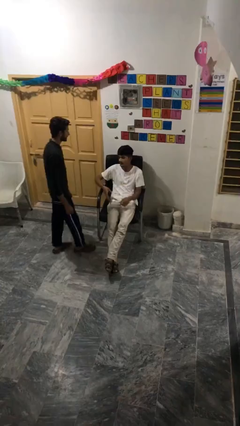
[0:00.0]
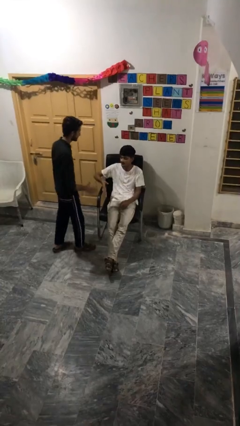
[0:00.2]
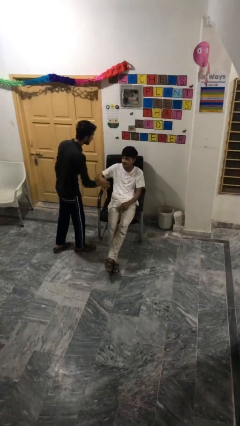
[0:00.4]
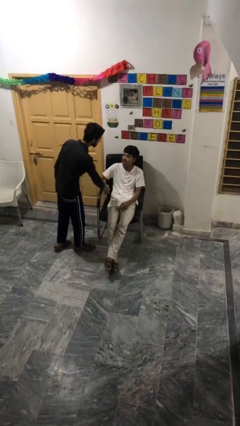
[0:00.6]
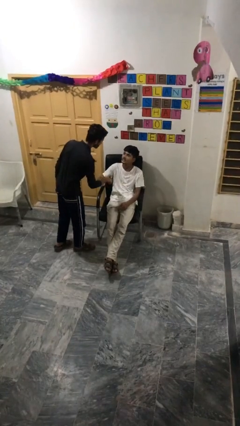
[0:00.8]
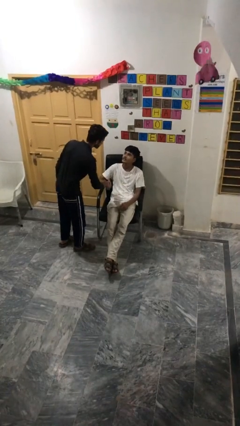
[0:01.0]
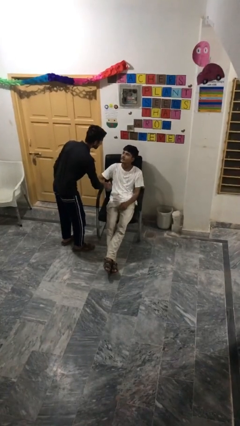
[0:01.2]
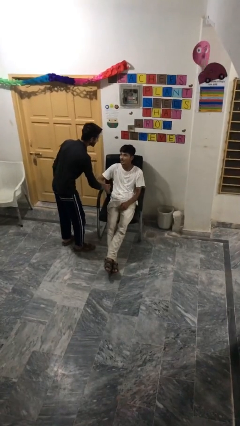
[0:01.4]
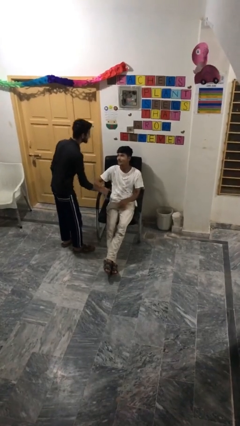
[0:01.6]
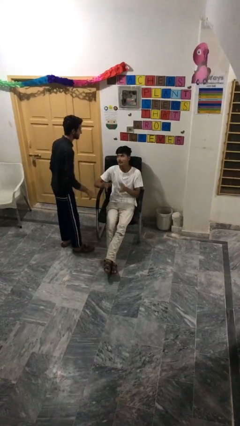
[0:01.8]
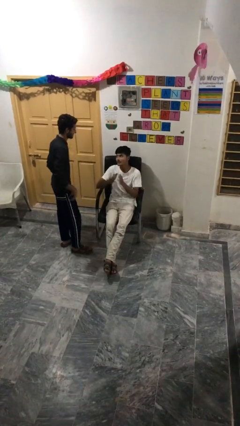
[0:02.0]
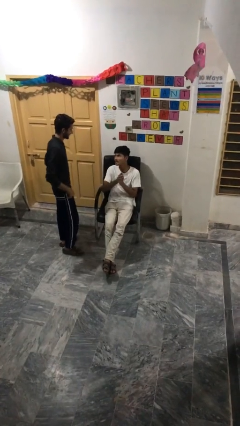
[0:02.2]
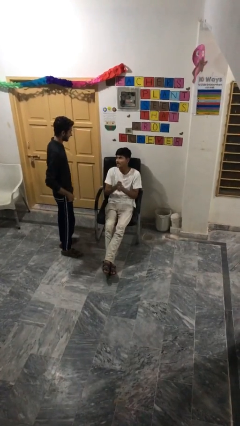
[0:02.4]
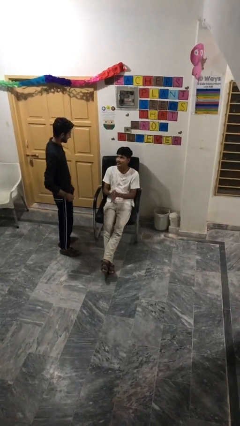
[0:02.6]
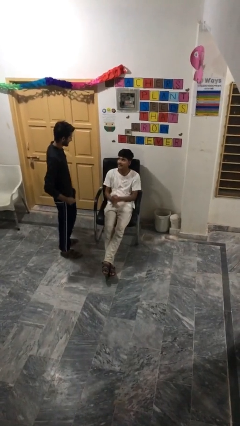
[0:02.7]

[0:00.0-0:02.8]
person shakes hand

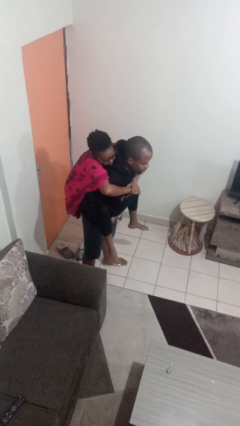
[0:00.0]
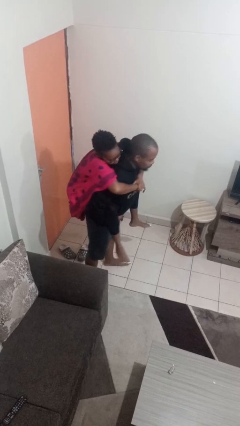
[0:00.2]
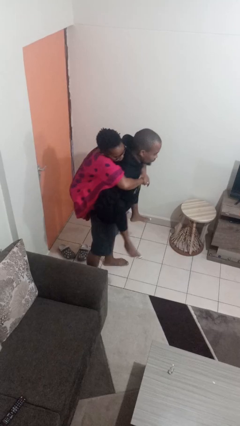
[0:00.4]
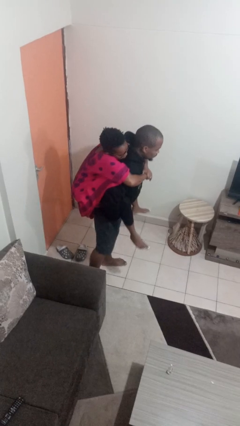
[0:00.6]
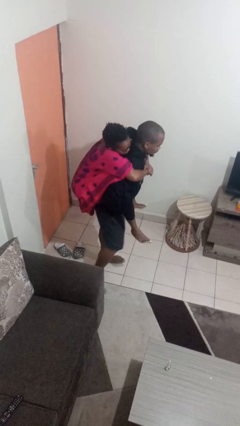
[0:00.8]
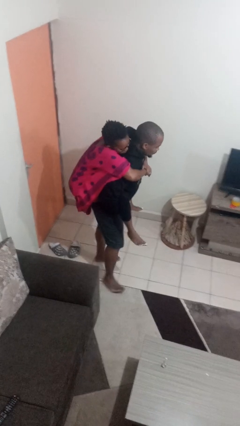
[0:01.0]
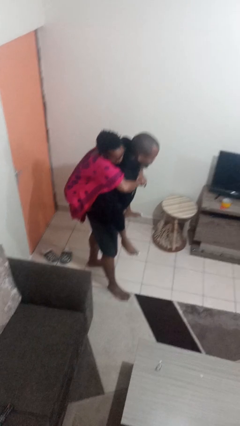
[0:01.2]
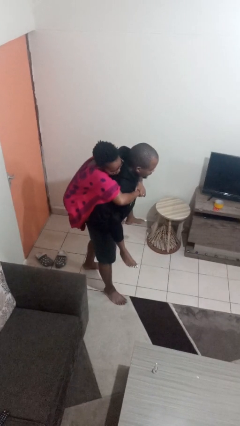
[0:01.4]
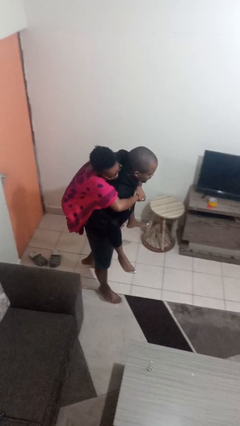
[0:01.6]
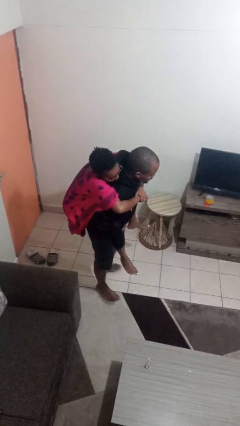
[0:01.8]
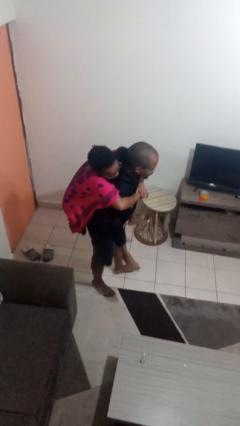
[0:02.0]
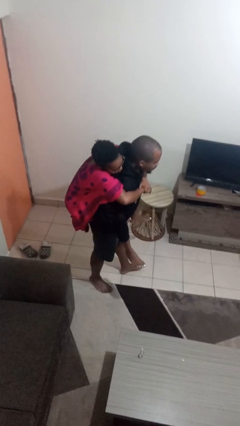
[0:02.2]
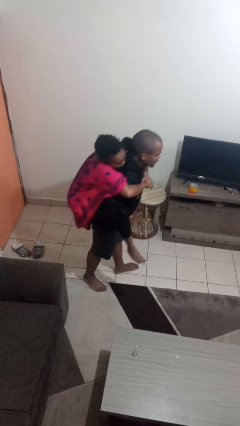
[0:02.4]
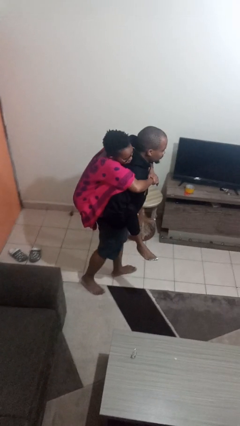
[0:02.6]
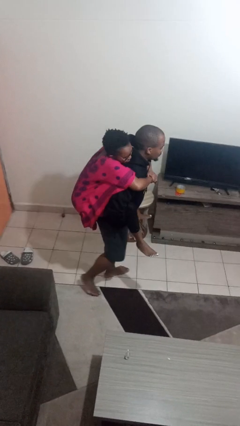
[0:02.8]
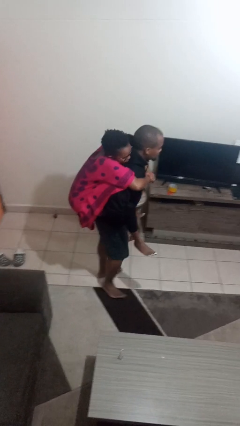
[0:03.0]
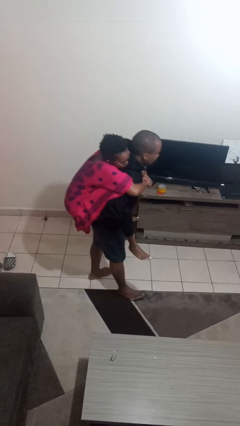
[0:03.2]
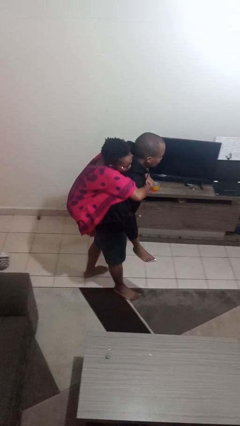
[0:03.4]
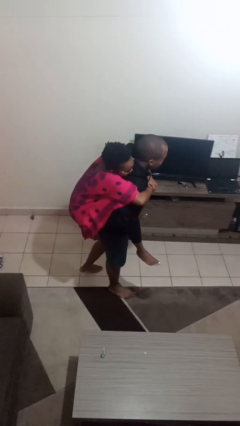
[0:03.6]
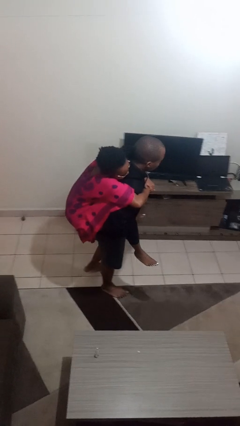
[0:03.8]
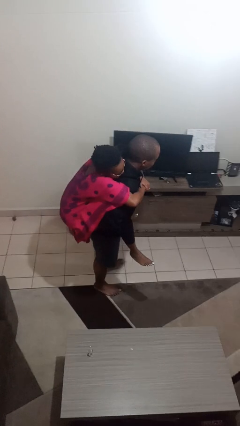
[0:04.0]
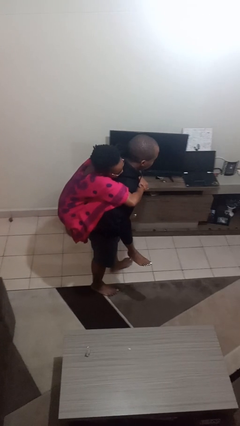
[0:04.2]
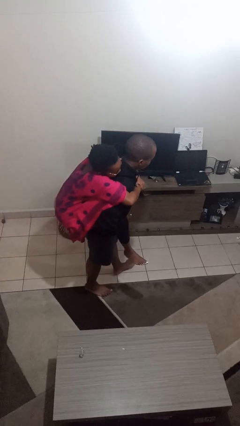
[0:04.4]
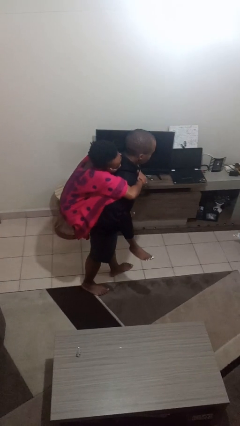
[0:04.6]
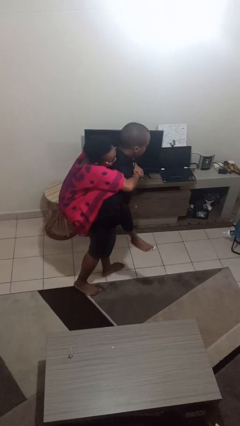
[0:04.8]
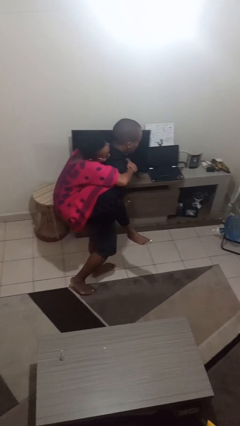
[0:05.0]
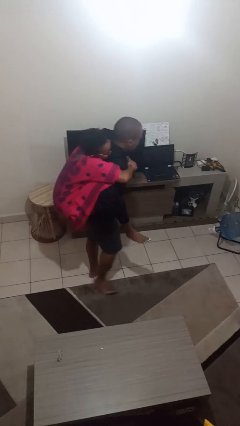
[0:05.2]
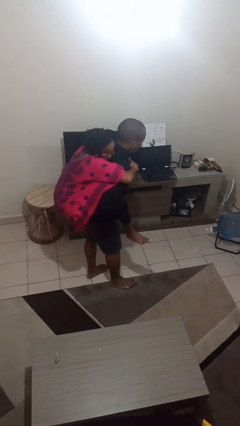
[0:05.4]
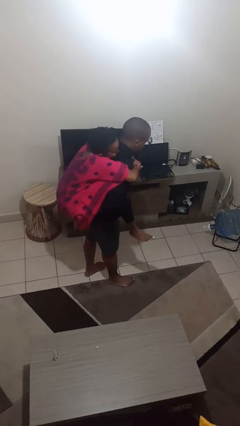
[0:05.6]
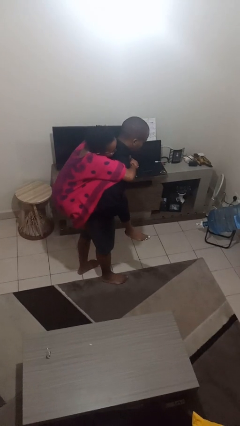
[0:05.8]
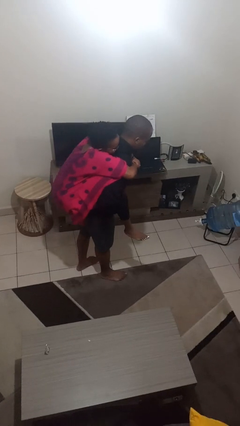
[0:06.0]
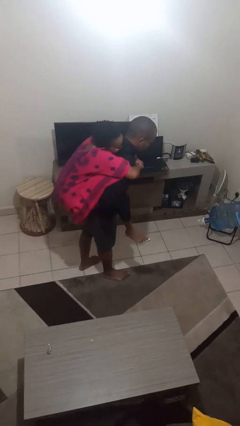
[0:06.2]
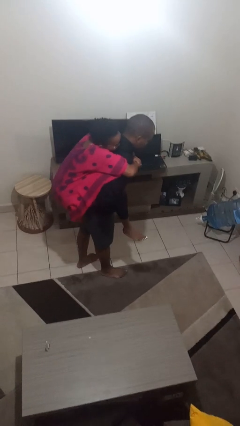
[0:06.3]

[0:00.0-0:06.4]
person carries person on back

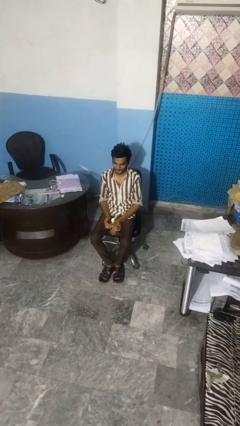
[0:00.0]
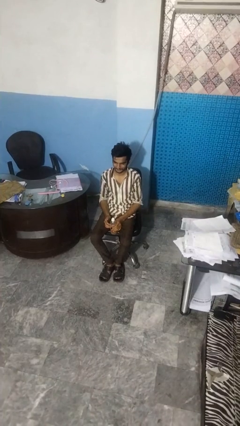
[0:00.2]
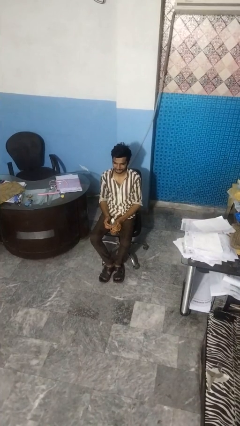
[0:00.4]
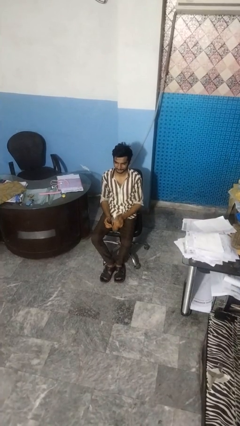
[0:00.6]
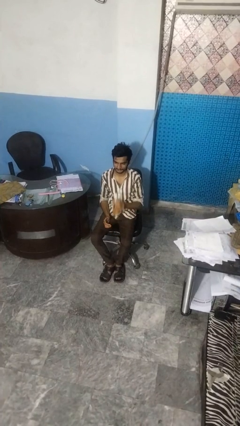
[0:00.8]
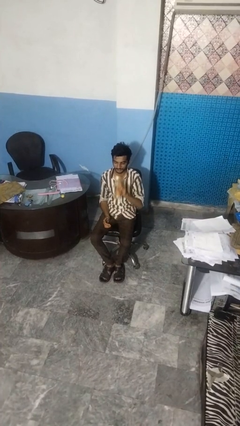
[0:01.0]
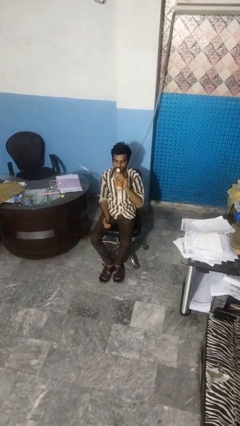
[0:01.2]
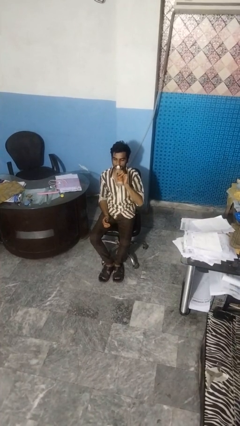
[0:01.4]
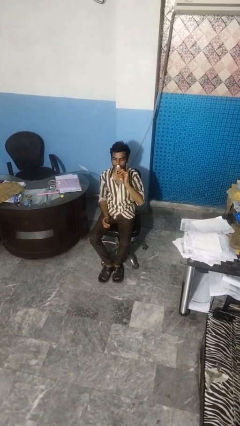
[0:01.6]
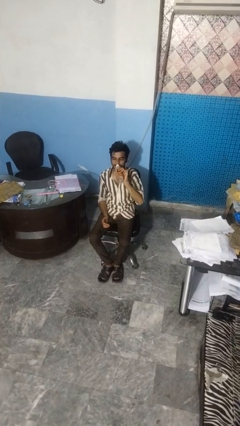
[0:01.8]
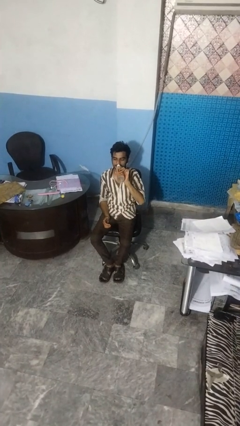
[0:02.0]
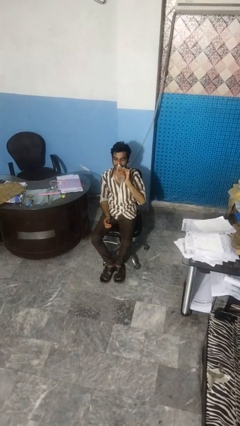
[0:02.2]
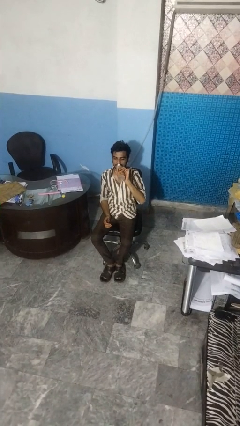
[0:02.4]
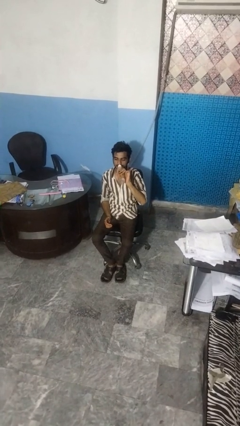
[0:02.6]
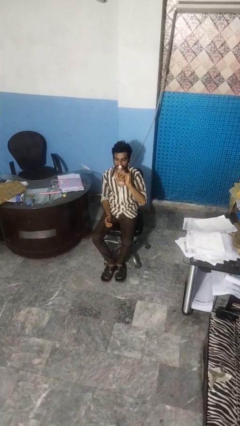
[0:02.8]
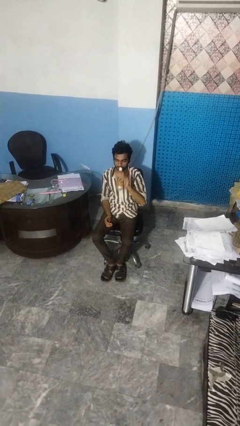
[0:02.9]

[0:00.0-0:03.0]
person drinks from bottle

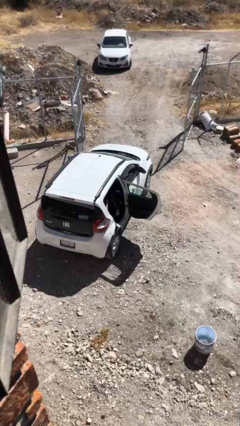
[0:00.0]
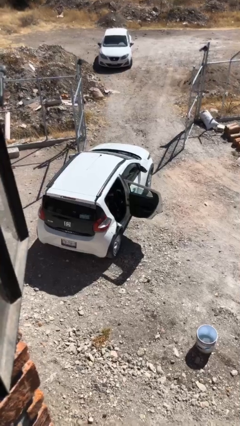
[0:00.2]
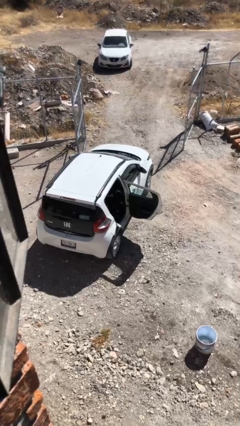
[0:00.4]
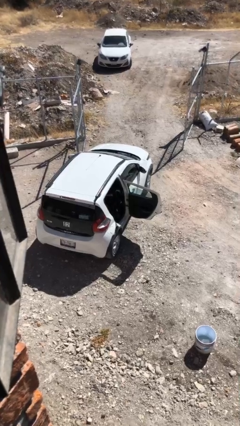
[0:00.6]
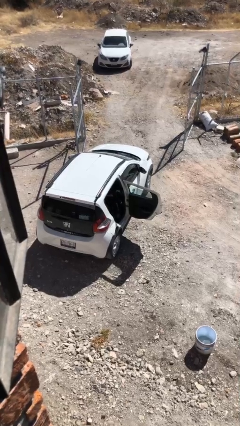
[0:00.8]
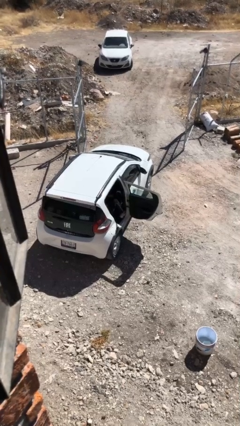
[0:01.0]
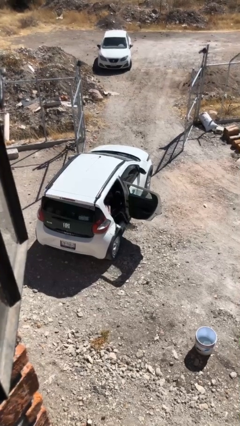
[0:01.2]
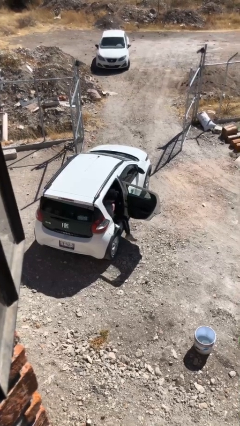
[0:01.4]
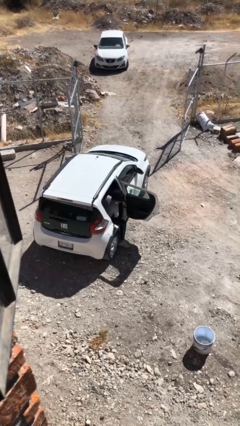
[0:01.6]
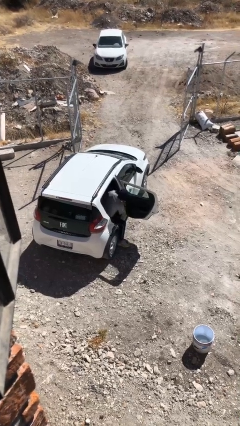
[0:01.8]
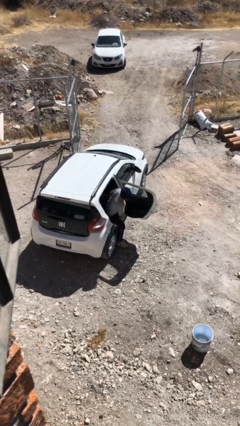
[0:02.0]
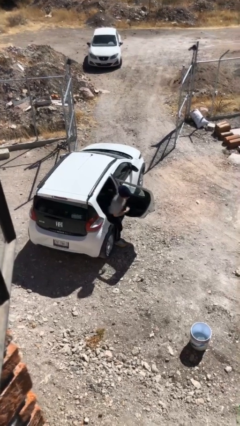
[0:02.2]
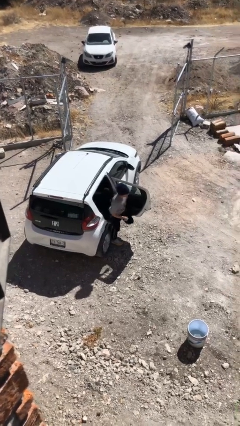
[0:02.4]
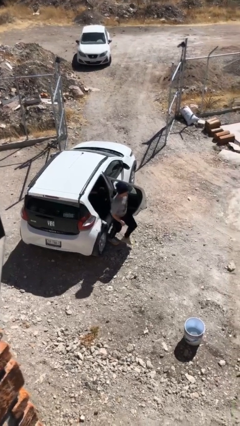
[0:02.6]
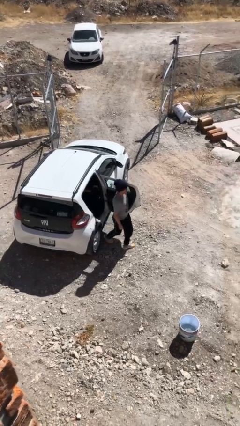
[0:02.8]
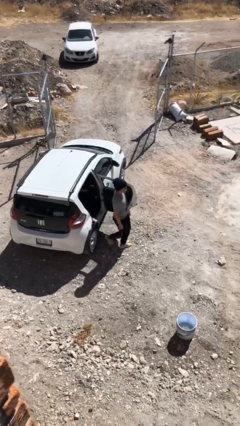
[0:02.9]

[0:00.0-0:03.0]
person exits car

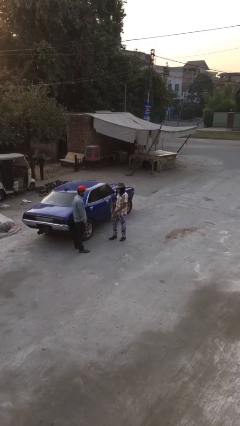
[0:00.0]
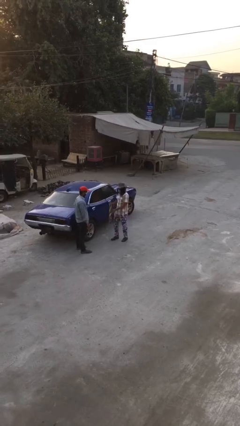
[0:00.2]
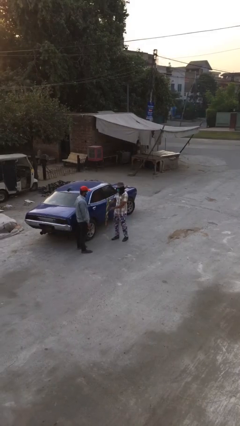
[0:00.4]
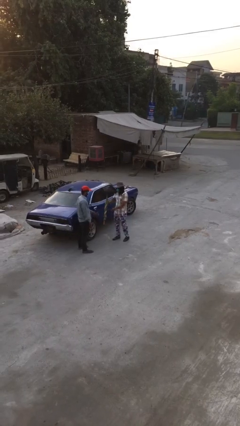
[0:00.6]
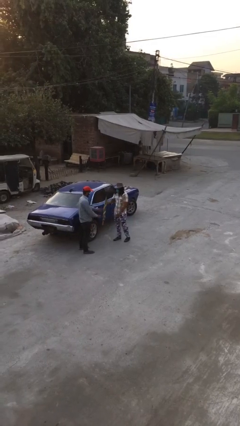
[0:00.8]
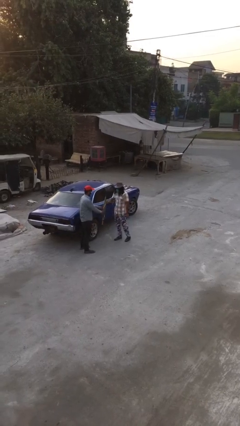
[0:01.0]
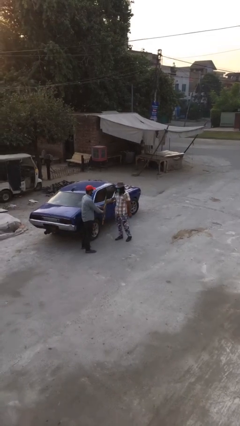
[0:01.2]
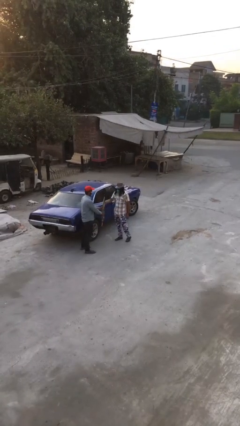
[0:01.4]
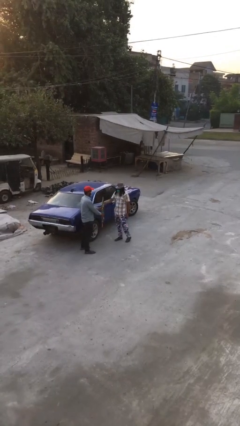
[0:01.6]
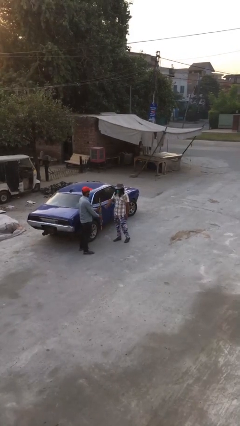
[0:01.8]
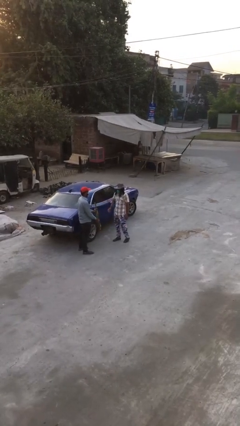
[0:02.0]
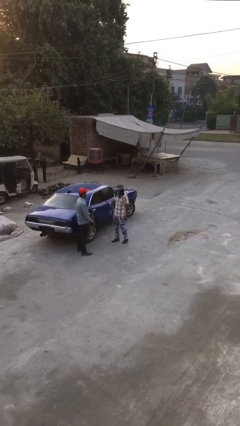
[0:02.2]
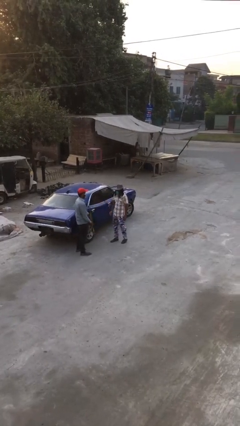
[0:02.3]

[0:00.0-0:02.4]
person transfers object to person
